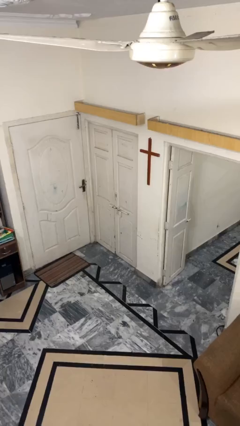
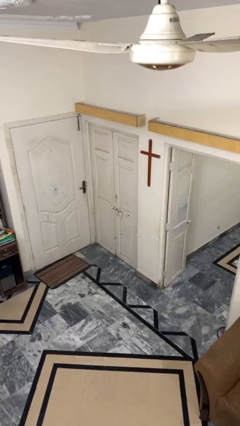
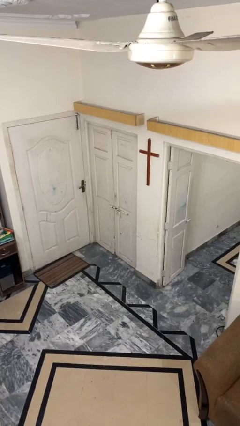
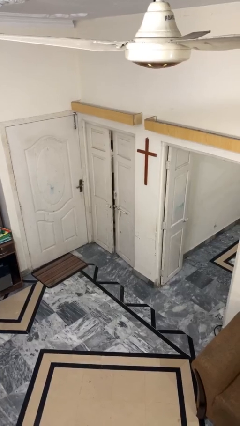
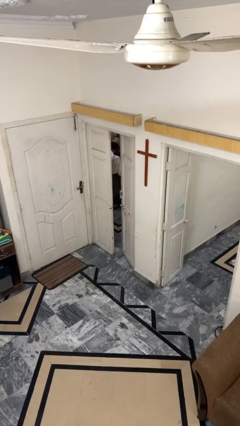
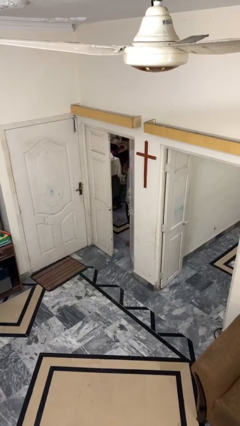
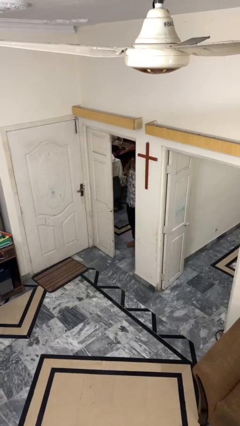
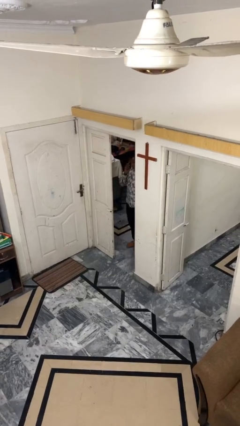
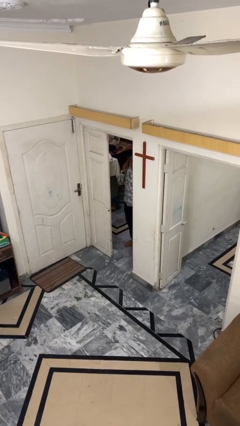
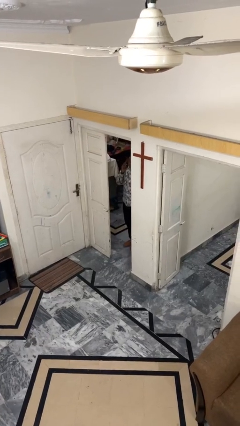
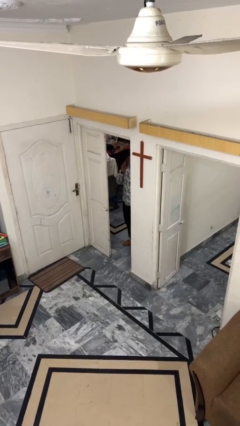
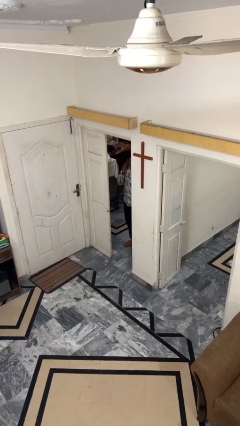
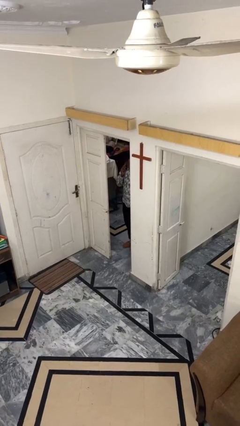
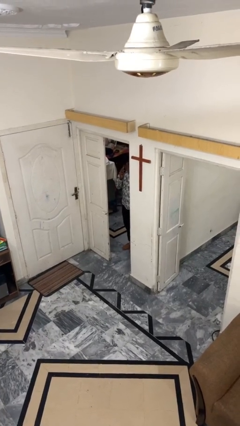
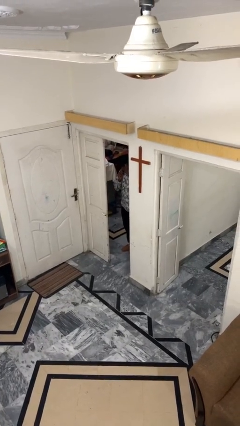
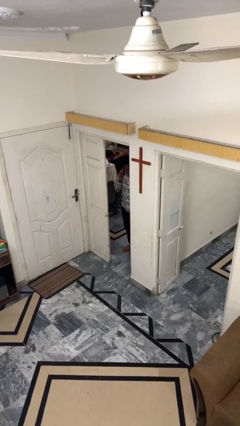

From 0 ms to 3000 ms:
person opens facility door

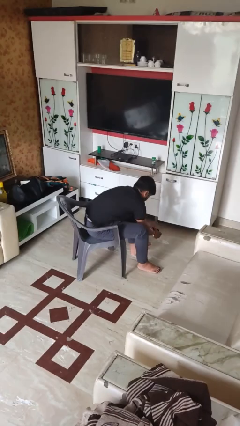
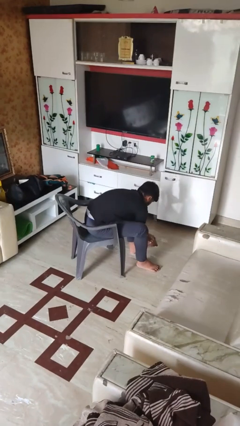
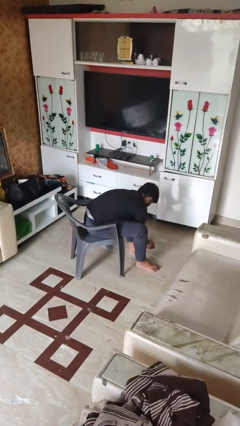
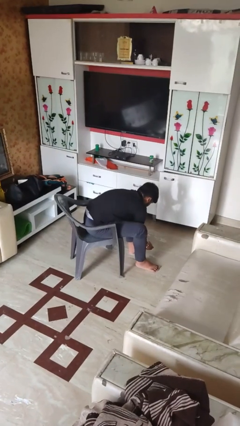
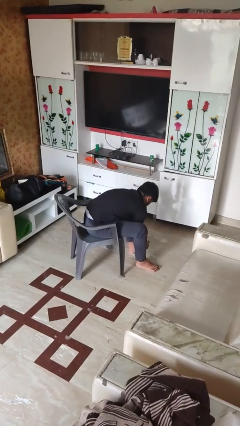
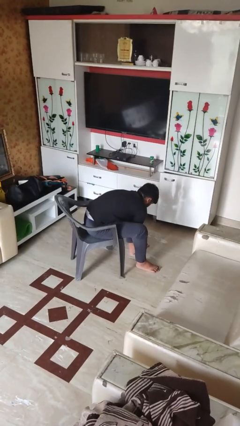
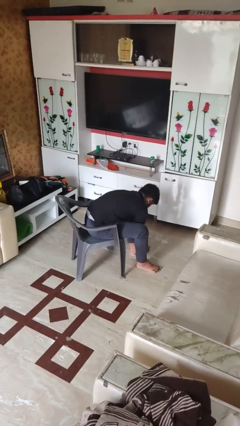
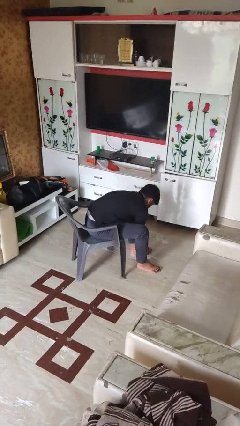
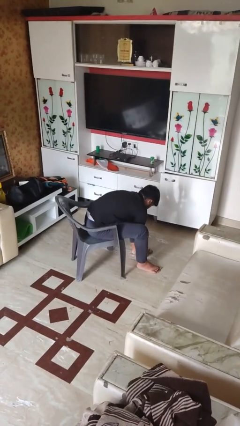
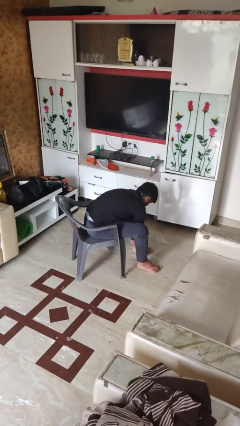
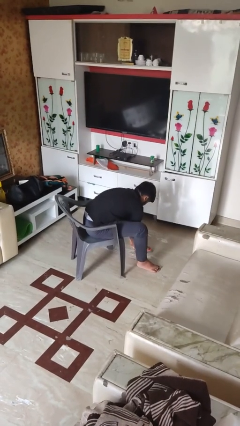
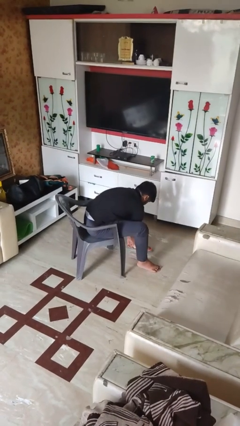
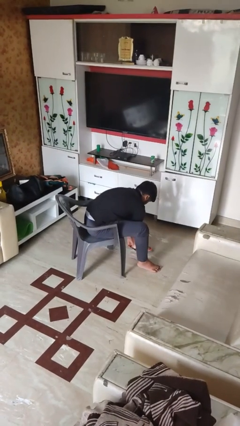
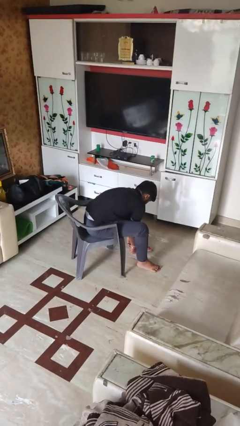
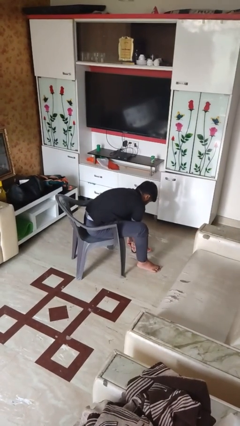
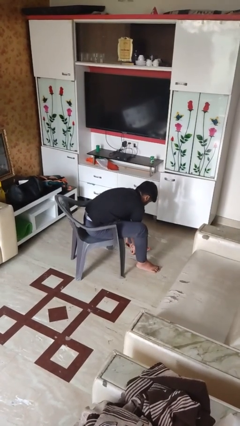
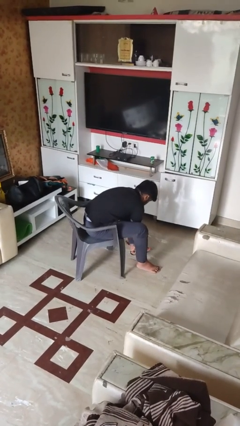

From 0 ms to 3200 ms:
person puts on socks

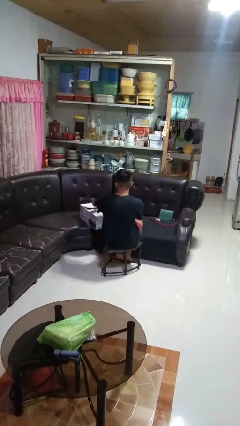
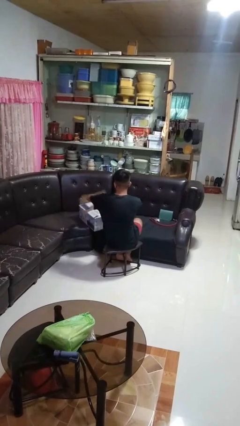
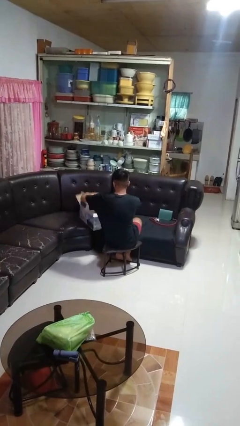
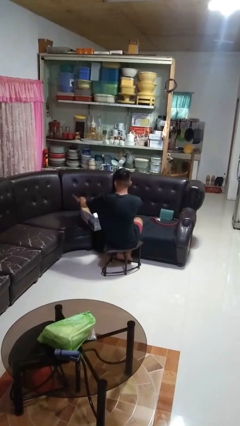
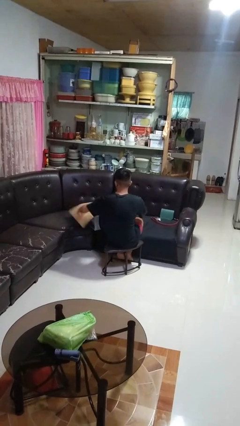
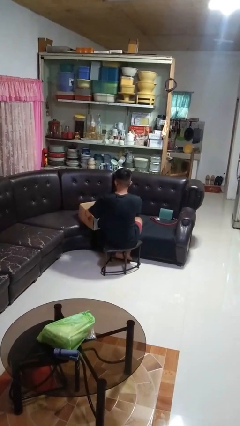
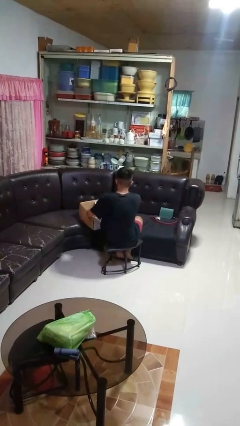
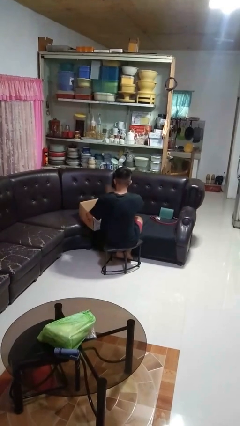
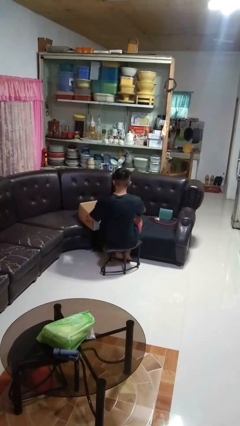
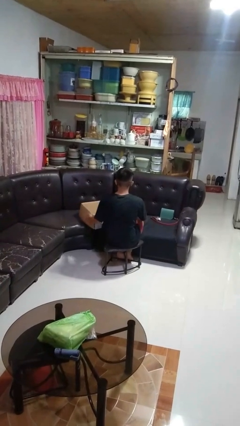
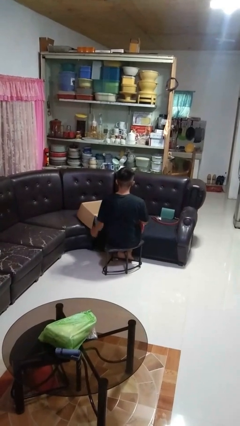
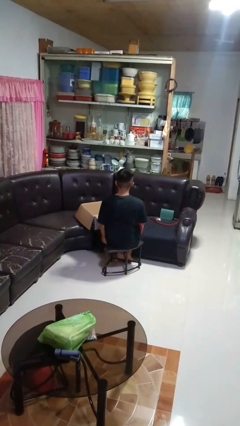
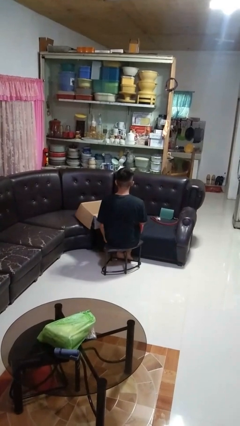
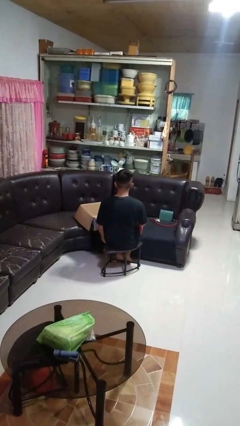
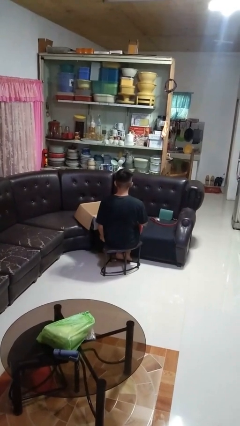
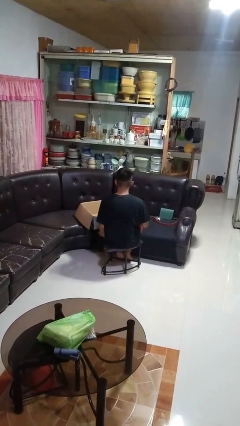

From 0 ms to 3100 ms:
person opens box

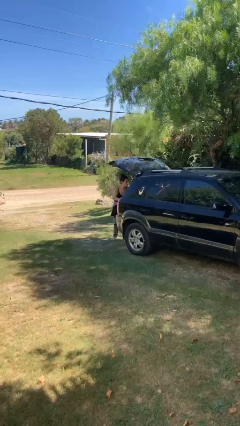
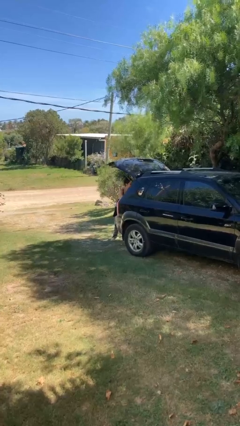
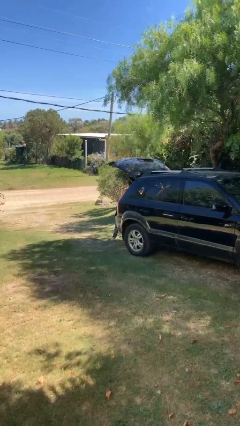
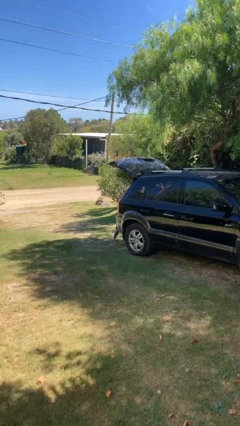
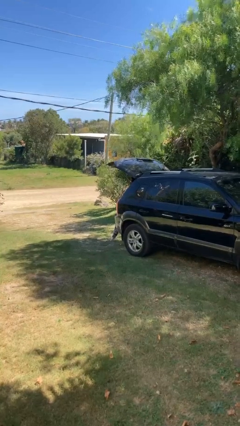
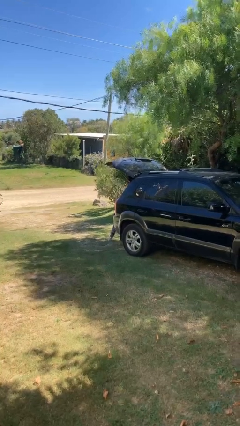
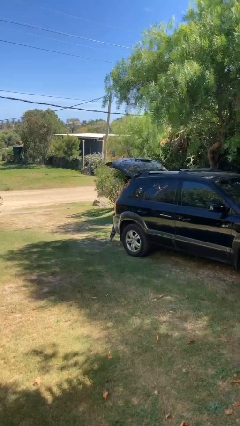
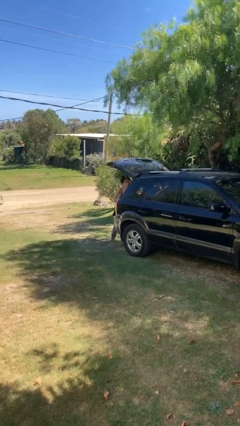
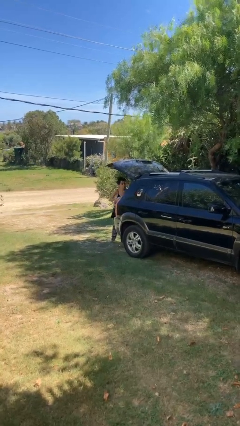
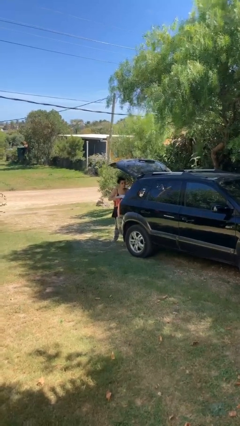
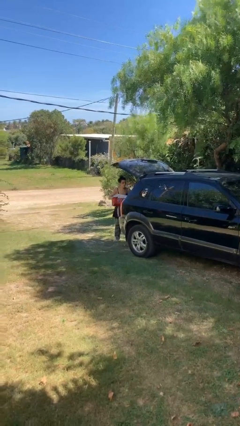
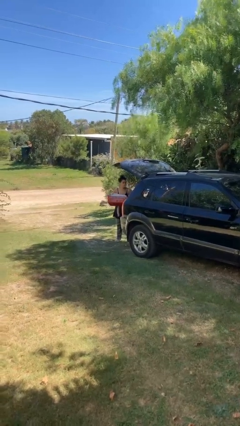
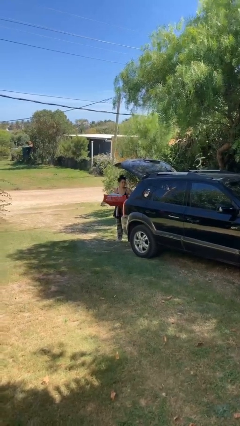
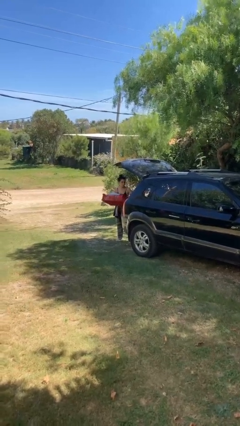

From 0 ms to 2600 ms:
person unloads car

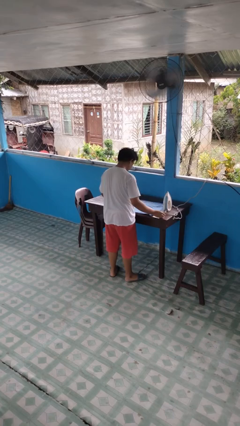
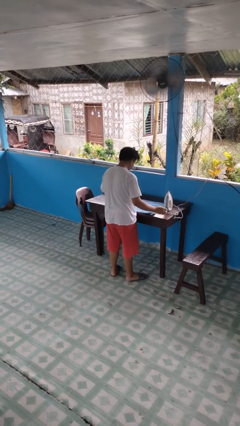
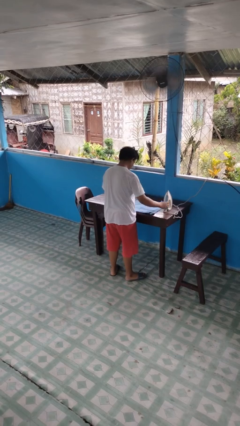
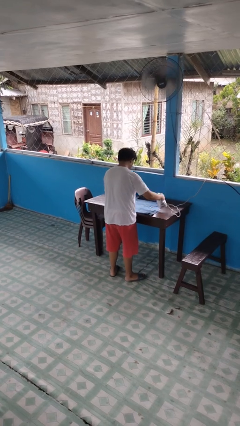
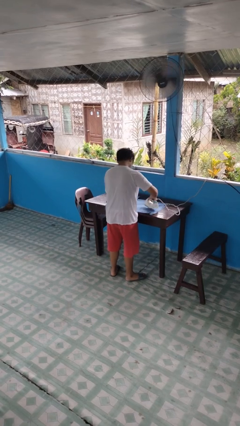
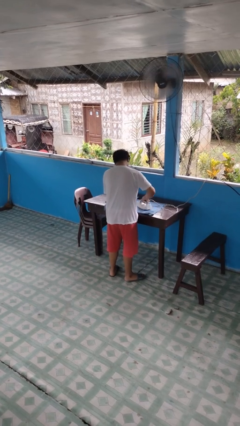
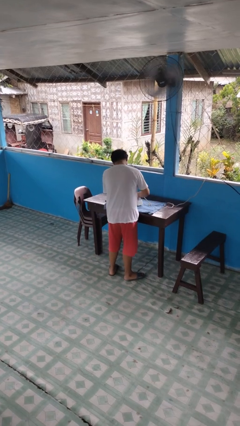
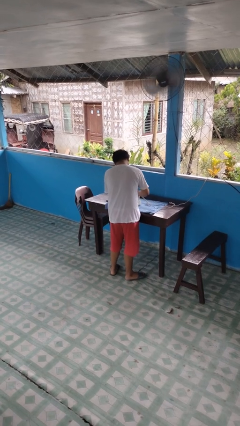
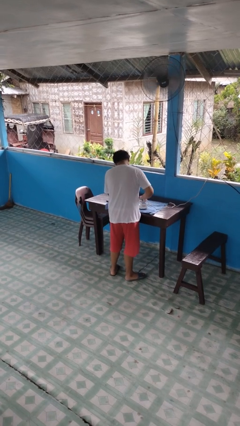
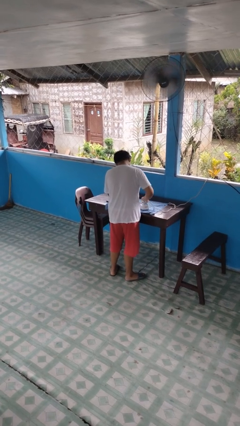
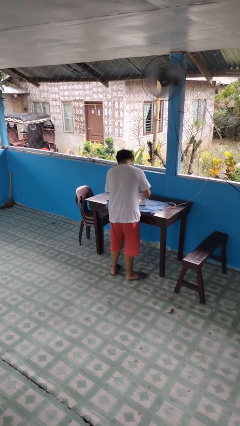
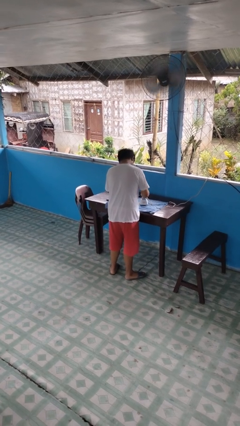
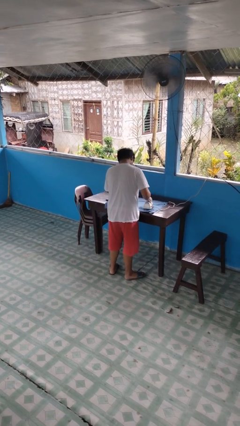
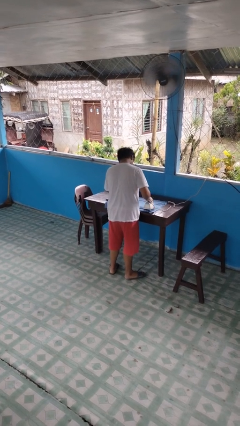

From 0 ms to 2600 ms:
person irons clothes

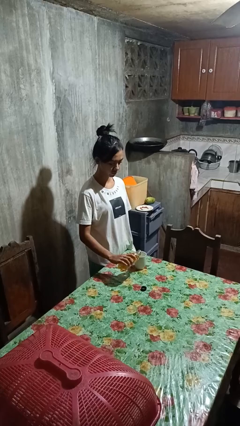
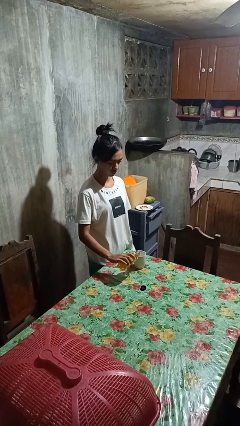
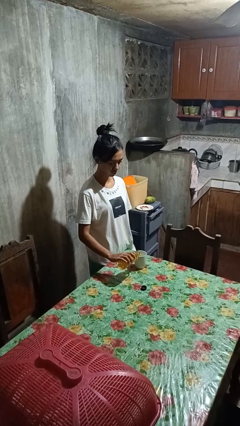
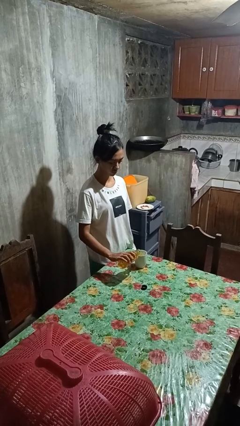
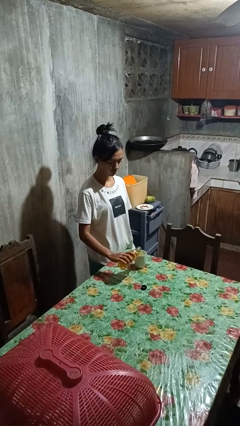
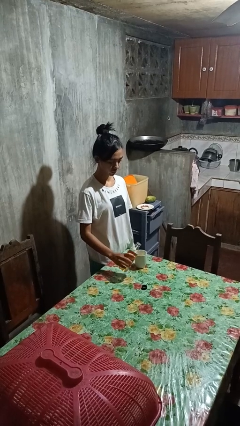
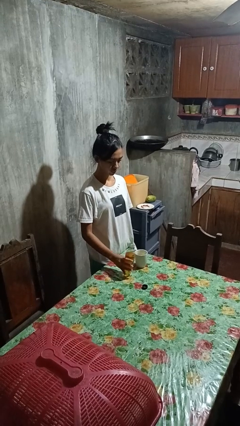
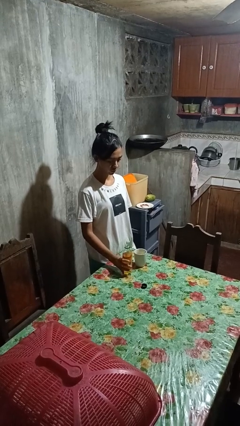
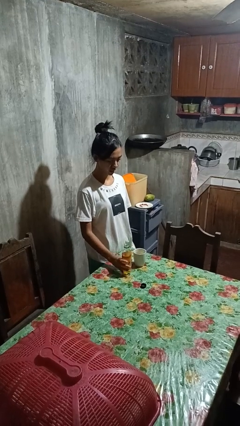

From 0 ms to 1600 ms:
person pours liquid into cup

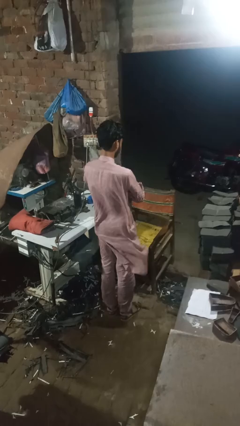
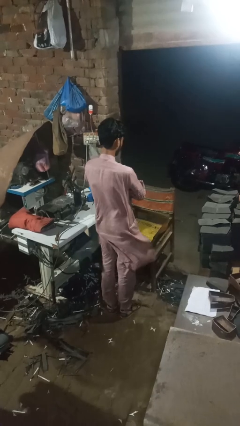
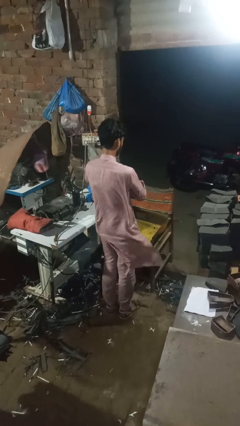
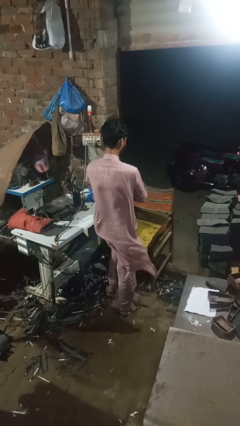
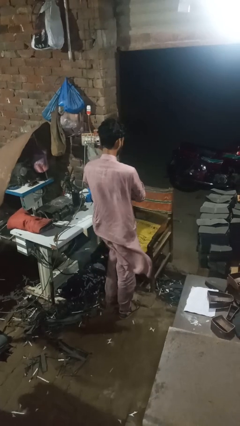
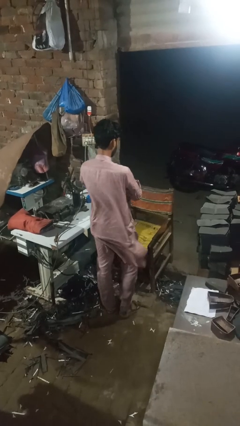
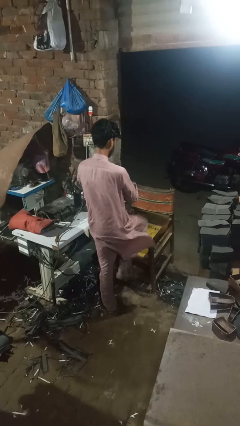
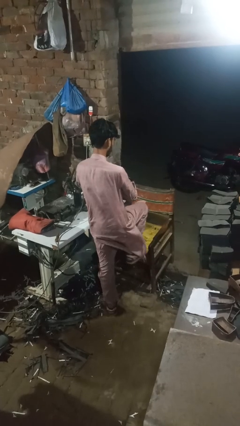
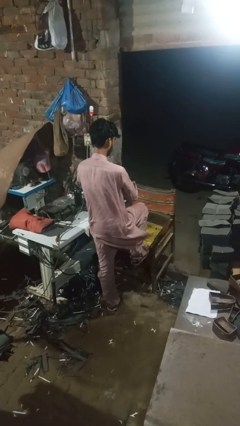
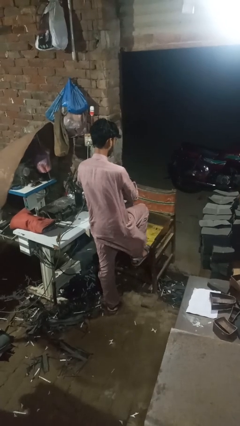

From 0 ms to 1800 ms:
person stubs toe
